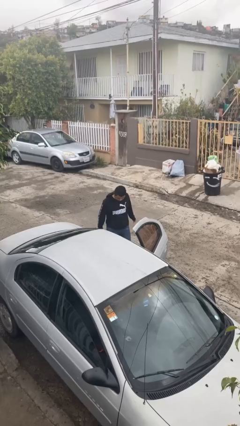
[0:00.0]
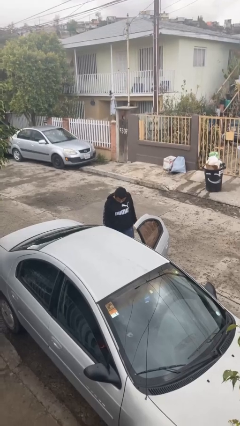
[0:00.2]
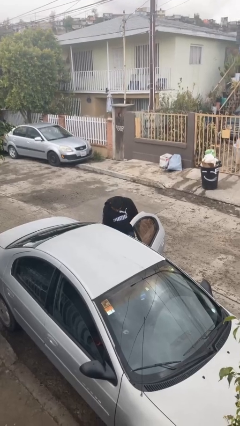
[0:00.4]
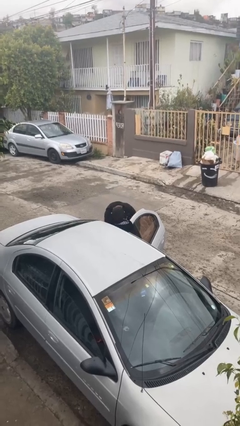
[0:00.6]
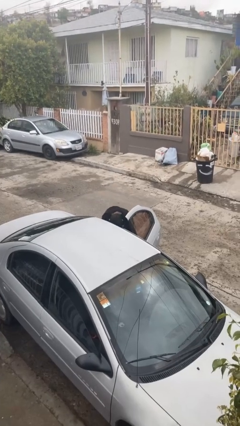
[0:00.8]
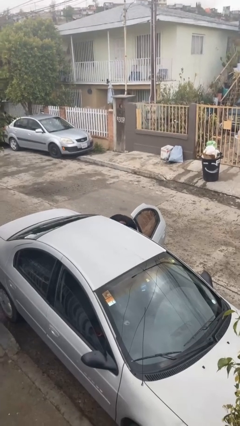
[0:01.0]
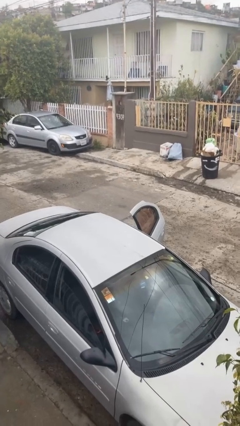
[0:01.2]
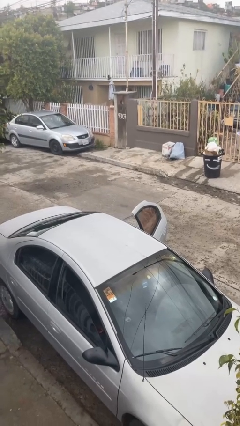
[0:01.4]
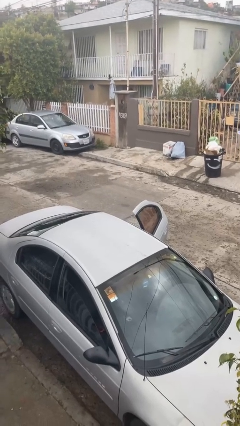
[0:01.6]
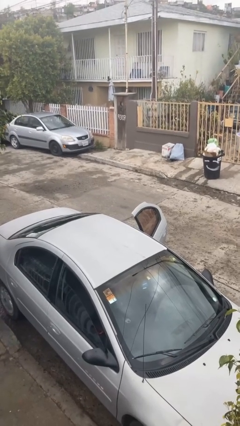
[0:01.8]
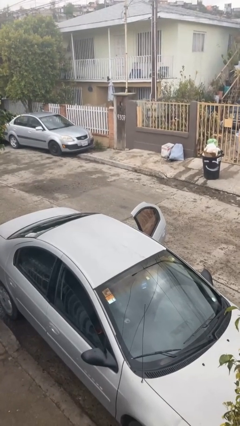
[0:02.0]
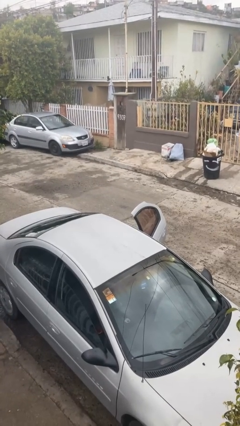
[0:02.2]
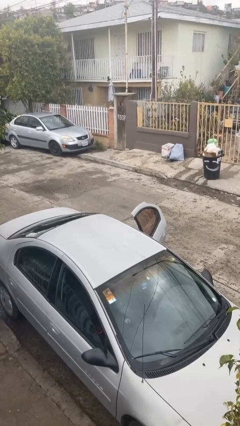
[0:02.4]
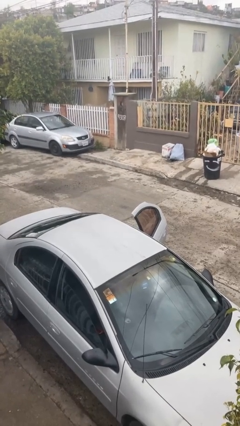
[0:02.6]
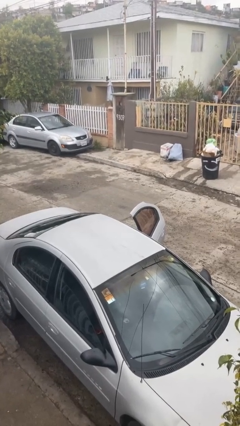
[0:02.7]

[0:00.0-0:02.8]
person enters car

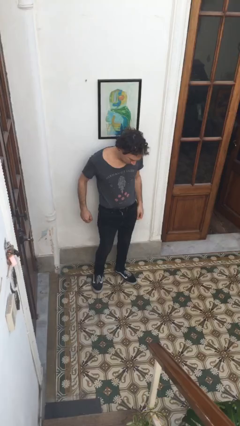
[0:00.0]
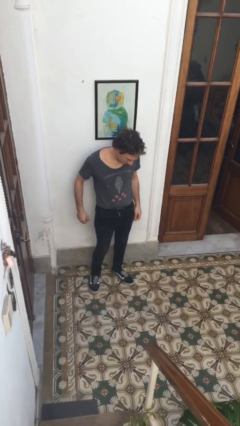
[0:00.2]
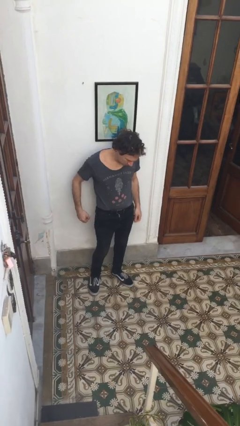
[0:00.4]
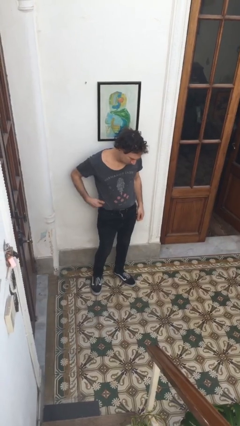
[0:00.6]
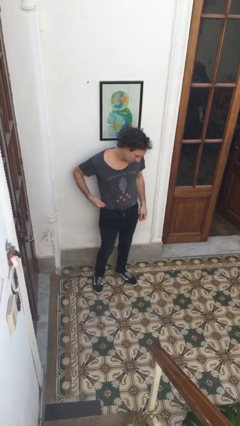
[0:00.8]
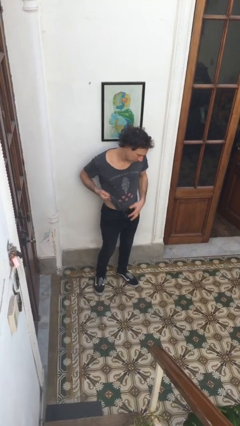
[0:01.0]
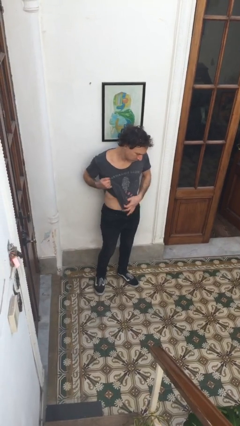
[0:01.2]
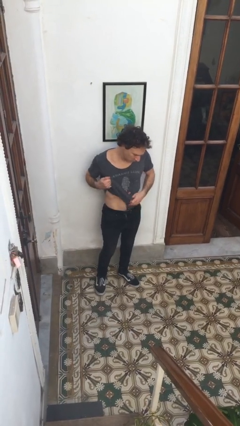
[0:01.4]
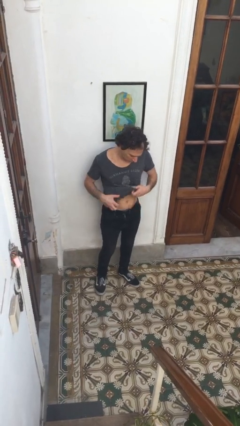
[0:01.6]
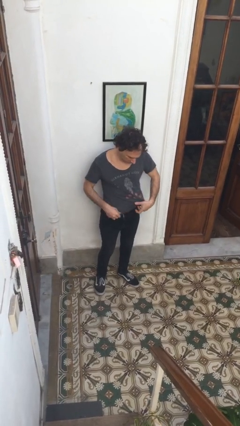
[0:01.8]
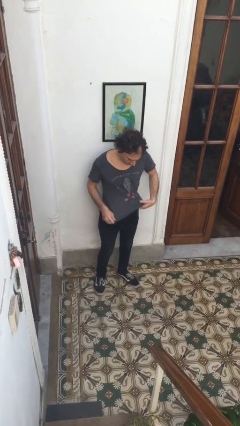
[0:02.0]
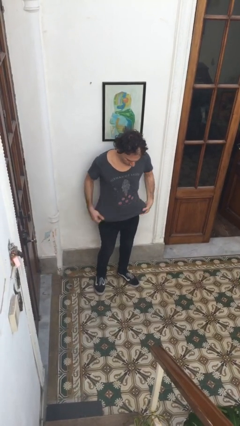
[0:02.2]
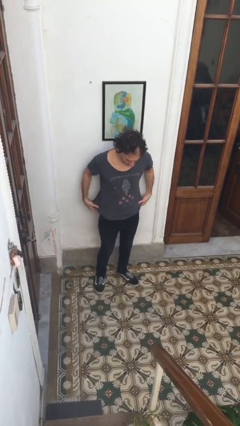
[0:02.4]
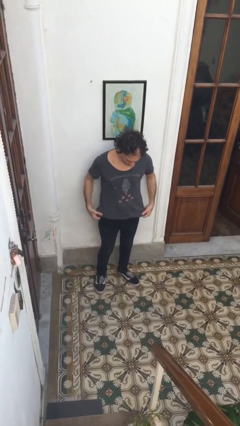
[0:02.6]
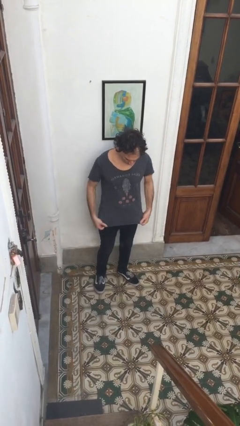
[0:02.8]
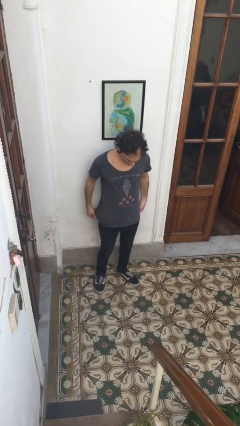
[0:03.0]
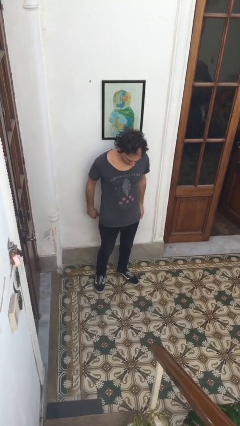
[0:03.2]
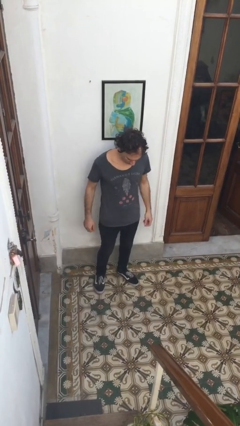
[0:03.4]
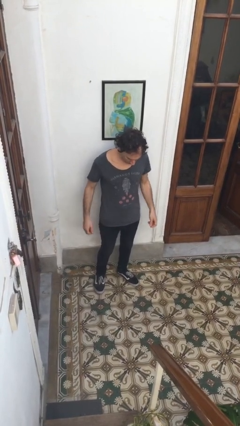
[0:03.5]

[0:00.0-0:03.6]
person untucks shirt

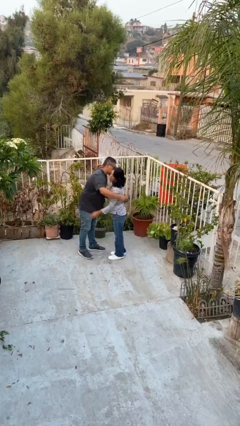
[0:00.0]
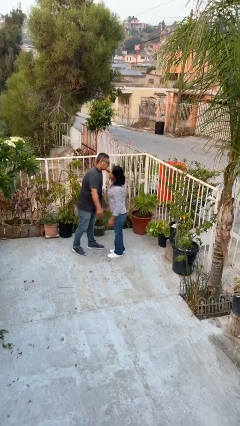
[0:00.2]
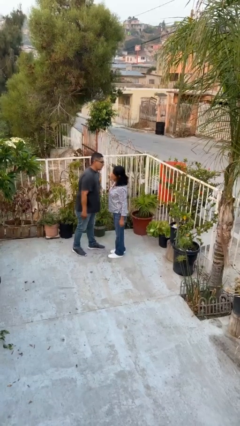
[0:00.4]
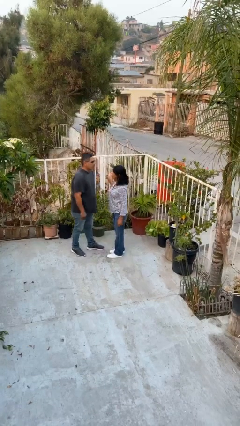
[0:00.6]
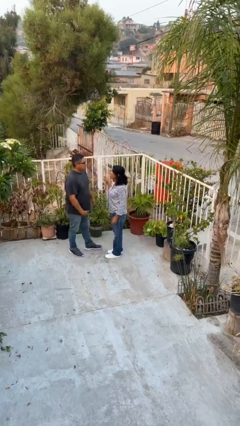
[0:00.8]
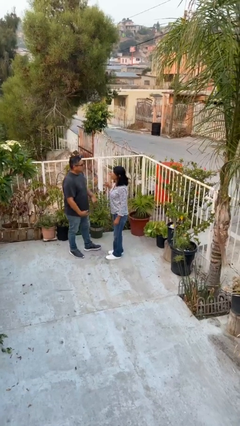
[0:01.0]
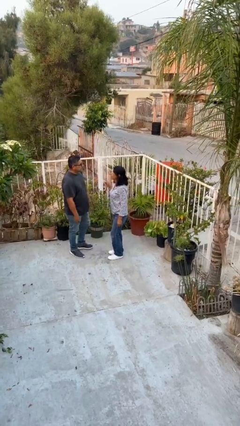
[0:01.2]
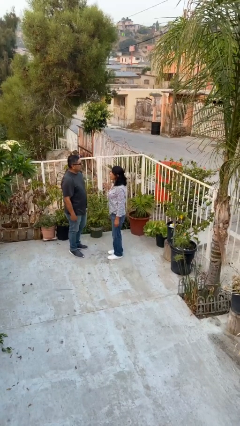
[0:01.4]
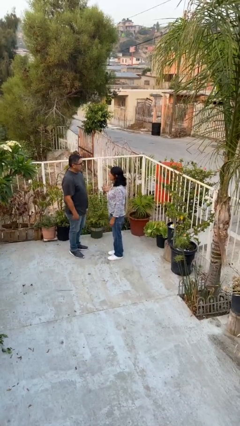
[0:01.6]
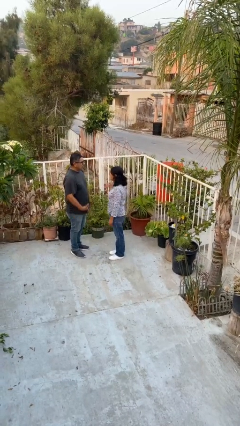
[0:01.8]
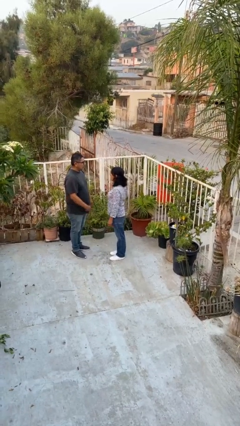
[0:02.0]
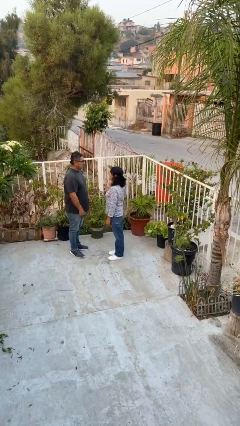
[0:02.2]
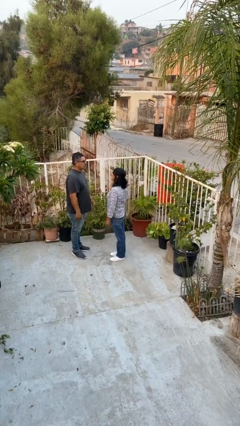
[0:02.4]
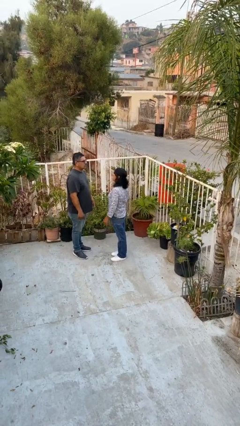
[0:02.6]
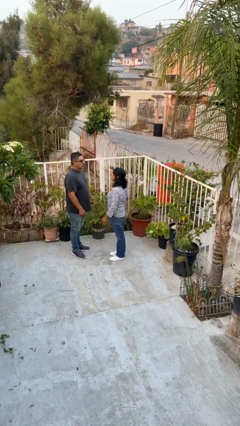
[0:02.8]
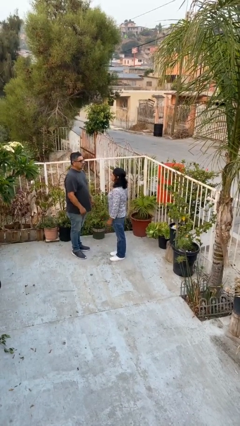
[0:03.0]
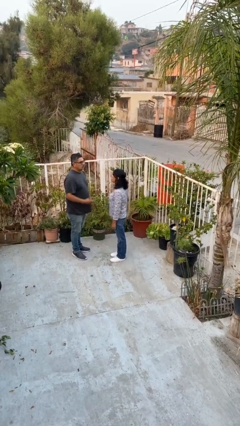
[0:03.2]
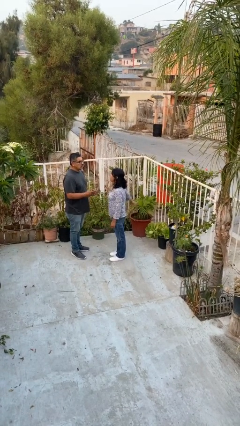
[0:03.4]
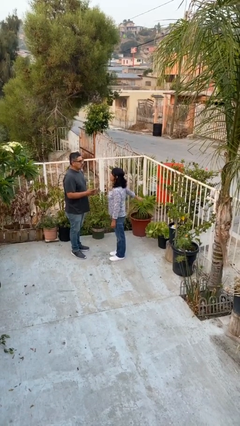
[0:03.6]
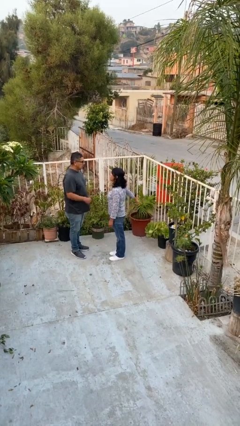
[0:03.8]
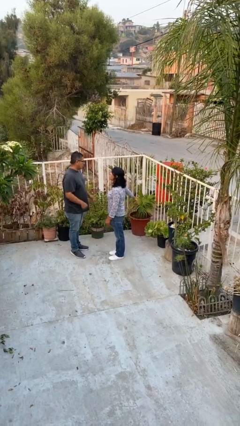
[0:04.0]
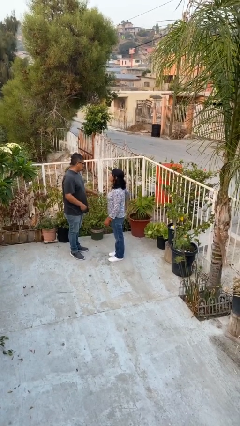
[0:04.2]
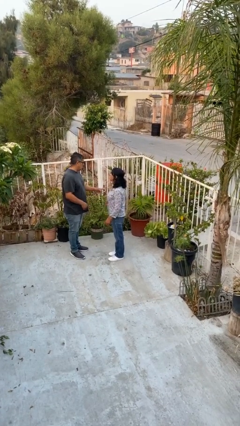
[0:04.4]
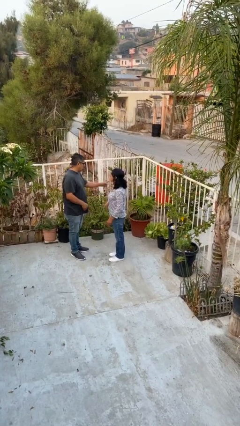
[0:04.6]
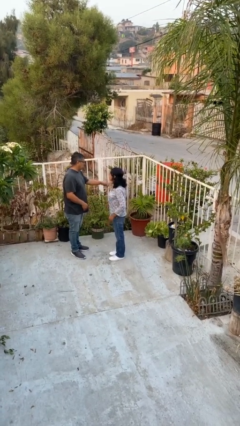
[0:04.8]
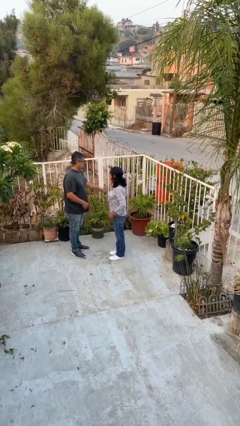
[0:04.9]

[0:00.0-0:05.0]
person talks to person

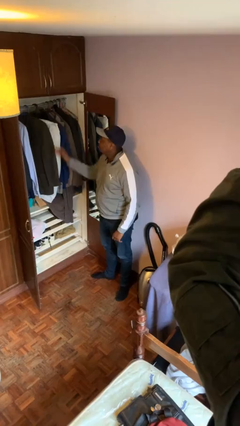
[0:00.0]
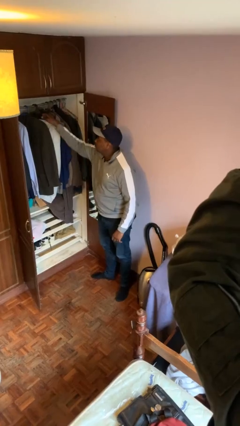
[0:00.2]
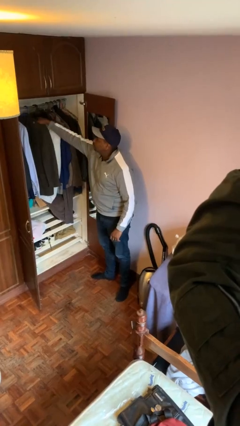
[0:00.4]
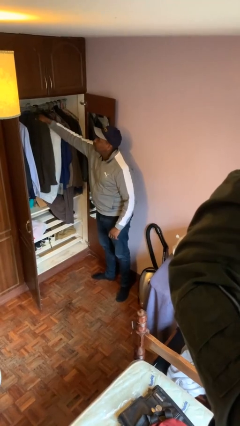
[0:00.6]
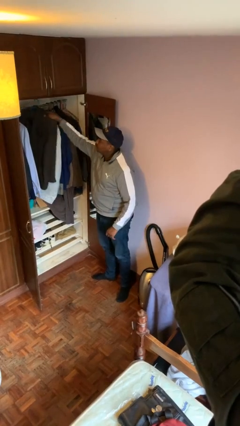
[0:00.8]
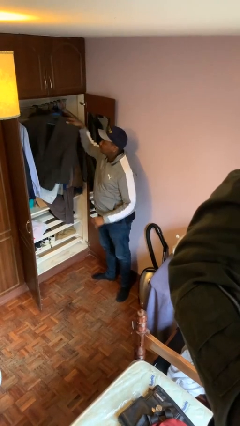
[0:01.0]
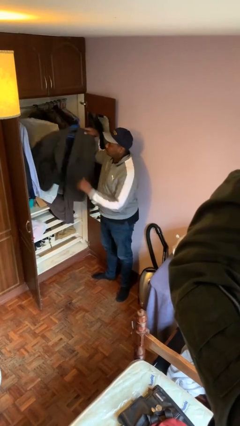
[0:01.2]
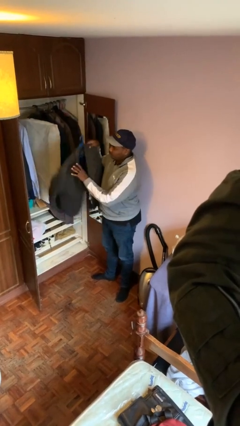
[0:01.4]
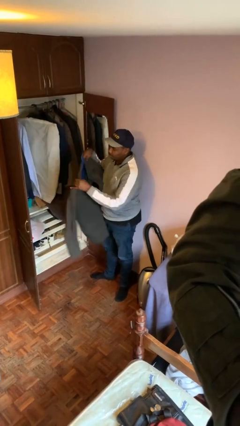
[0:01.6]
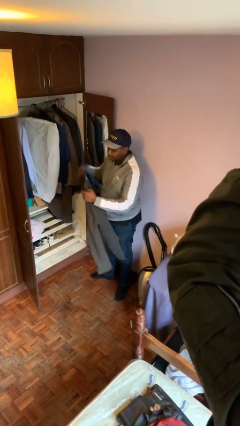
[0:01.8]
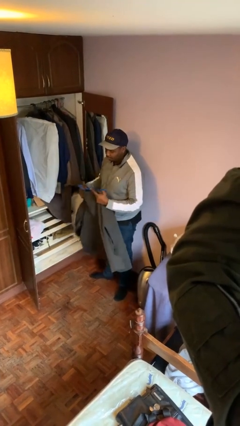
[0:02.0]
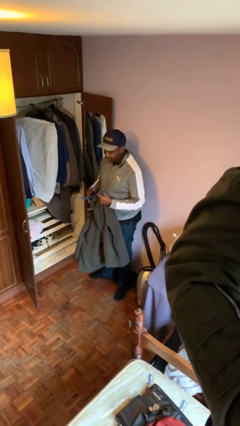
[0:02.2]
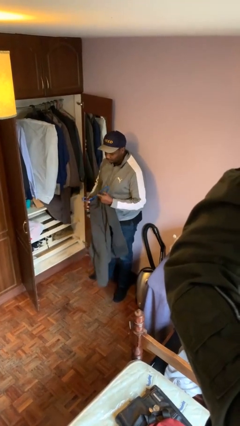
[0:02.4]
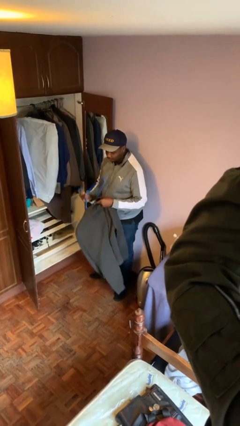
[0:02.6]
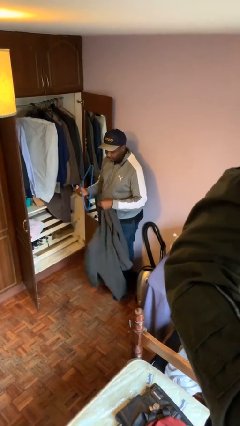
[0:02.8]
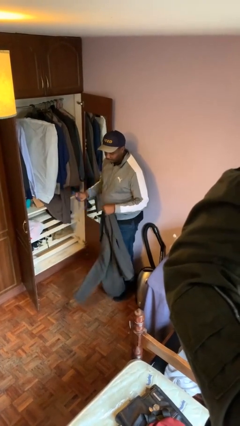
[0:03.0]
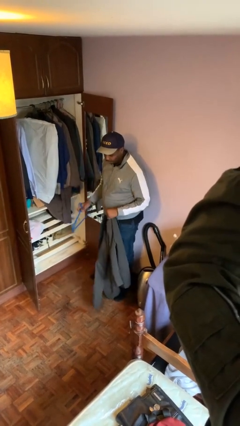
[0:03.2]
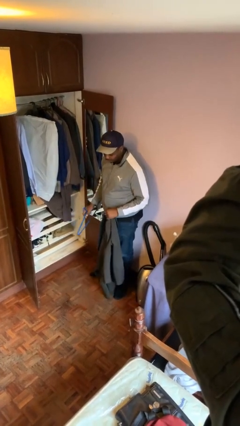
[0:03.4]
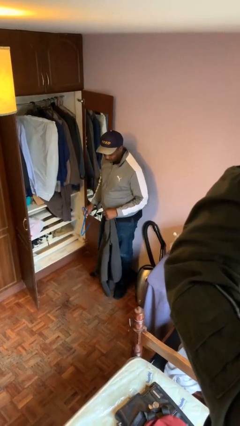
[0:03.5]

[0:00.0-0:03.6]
person takes clothes from closet

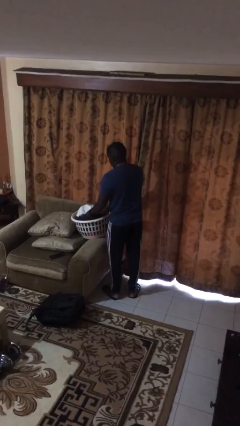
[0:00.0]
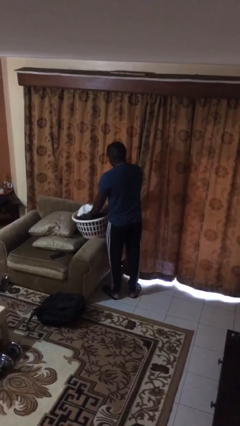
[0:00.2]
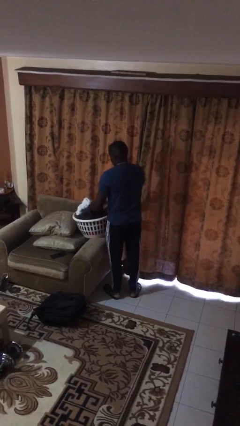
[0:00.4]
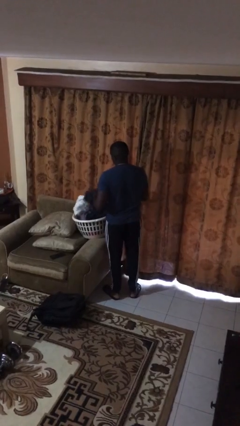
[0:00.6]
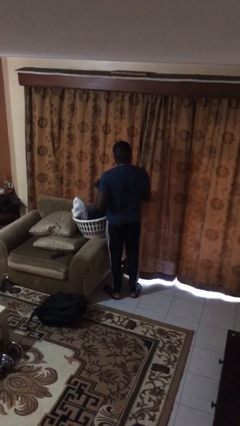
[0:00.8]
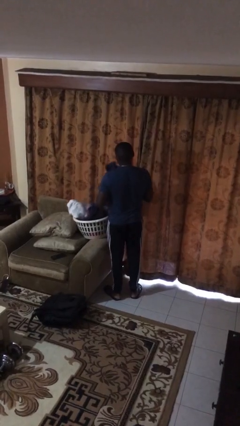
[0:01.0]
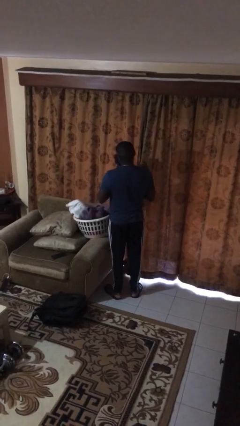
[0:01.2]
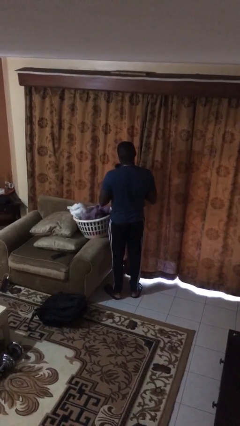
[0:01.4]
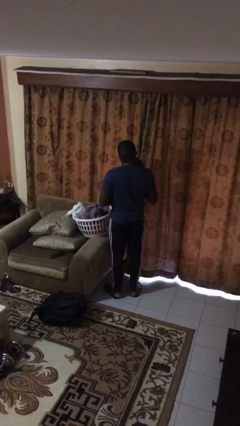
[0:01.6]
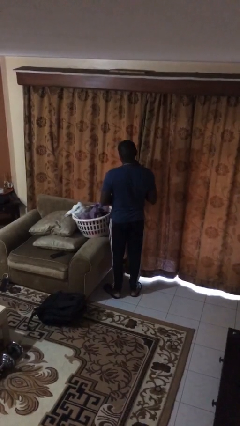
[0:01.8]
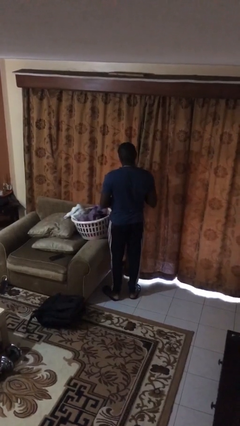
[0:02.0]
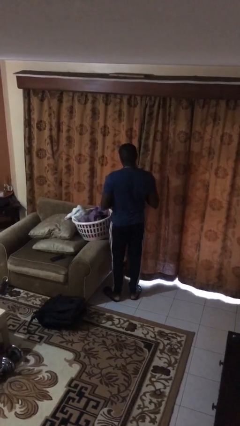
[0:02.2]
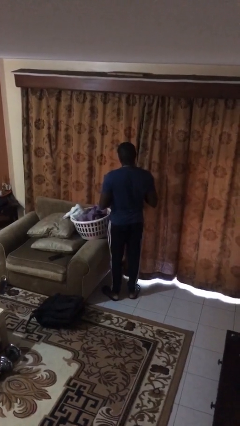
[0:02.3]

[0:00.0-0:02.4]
person takes object from basket

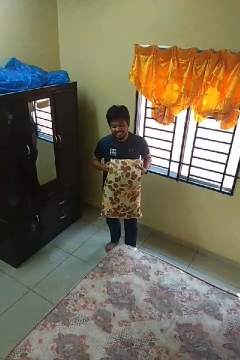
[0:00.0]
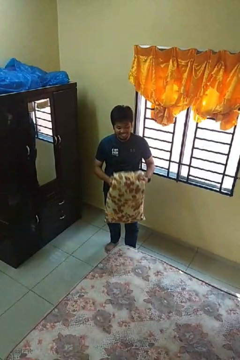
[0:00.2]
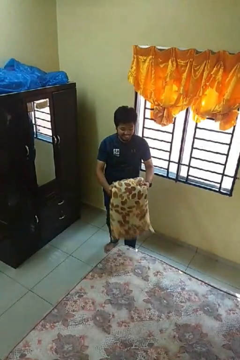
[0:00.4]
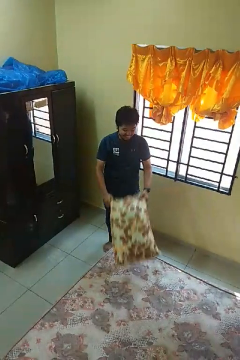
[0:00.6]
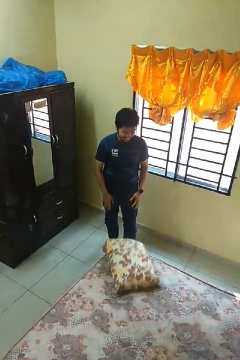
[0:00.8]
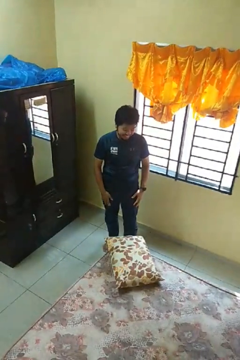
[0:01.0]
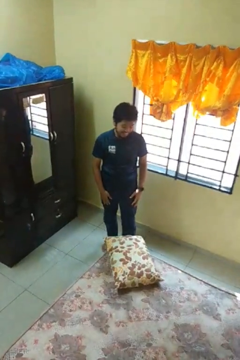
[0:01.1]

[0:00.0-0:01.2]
person puts down object on bed
